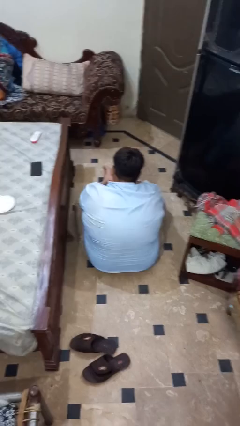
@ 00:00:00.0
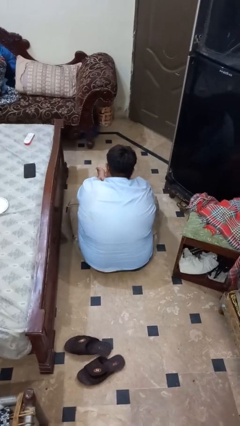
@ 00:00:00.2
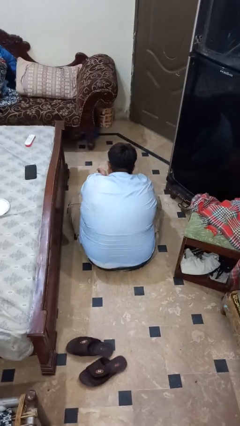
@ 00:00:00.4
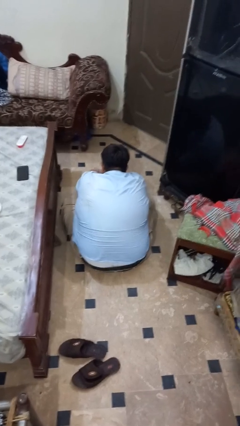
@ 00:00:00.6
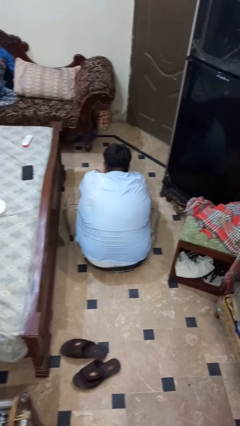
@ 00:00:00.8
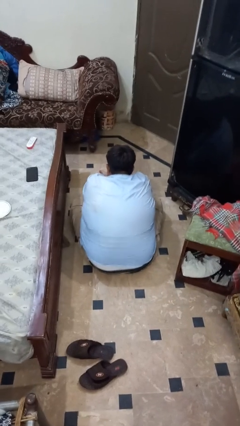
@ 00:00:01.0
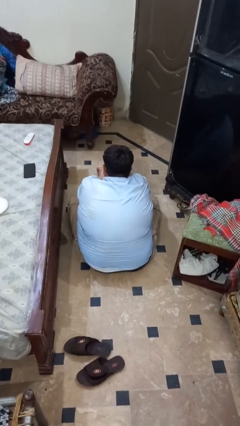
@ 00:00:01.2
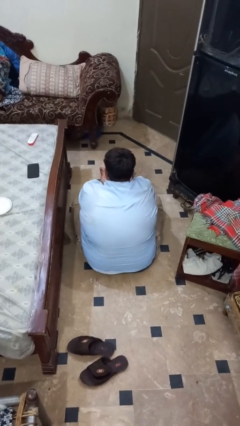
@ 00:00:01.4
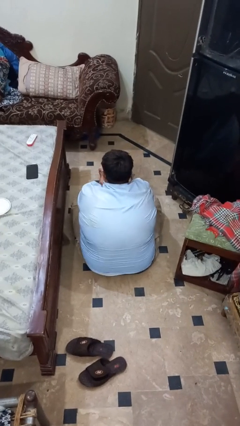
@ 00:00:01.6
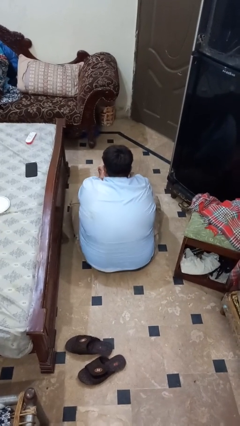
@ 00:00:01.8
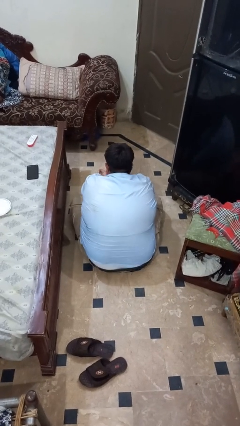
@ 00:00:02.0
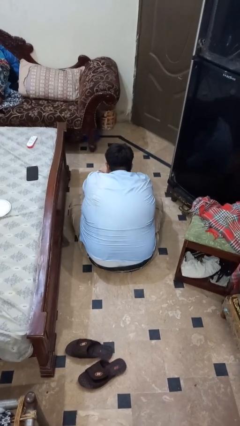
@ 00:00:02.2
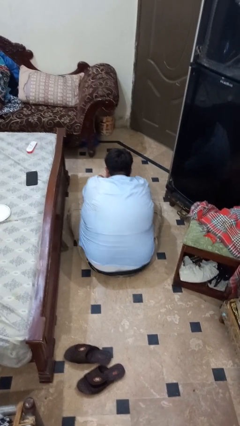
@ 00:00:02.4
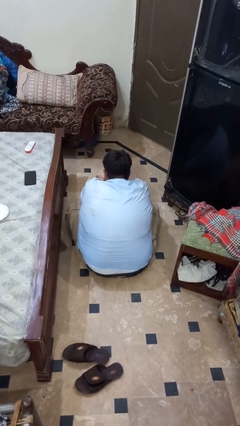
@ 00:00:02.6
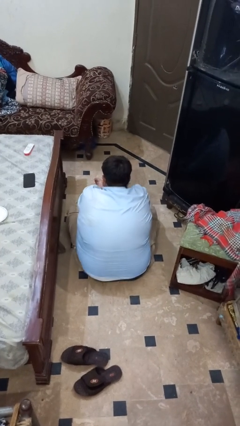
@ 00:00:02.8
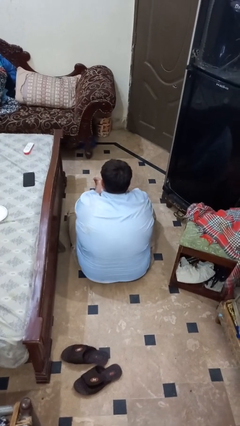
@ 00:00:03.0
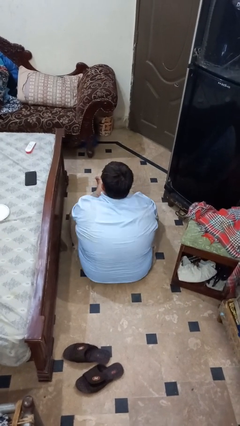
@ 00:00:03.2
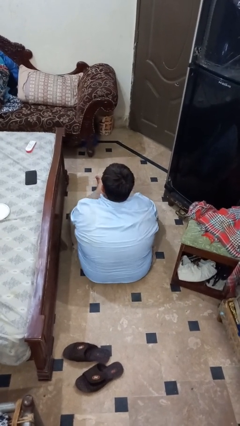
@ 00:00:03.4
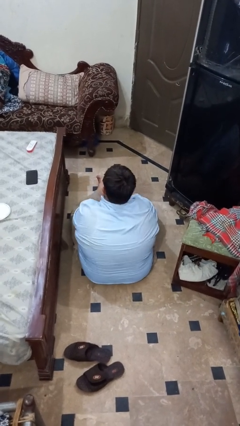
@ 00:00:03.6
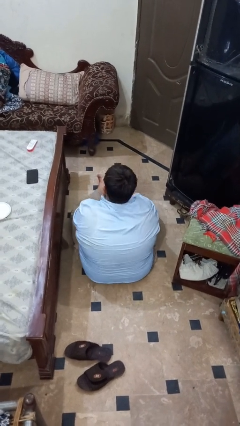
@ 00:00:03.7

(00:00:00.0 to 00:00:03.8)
person rubs foot

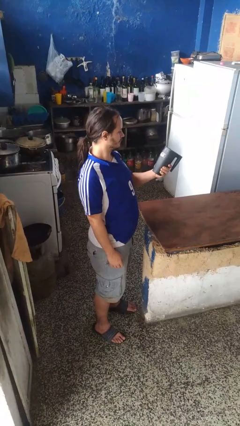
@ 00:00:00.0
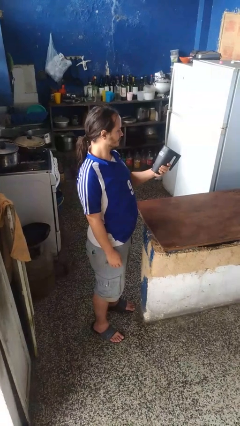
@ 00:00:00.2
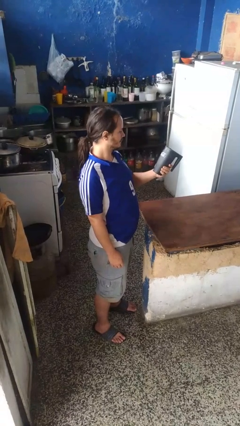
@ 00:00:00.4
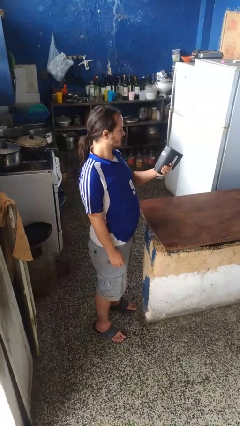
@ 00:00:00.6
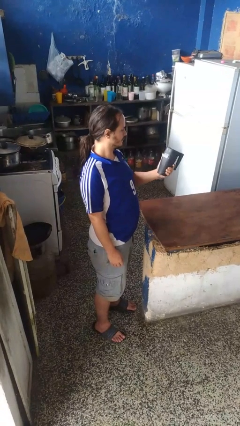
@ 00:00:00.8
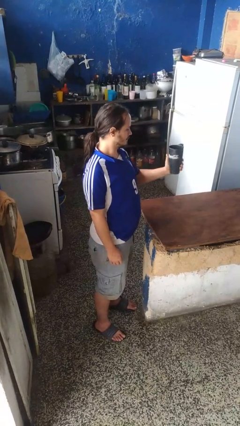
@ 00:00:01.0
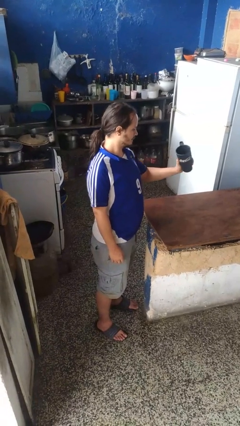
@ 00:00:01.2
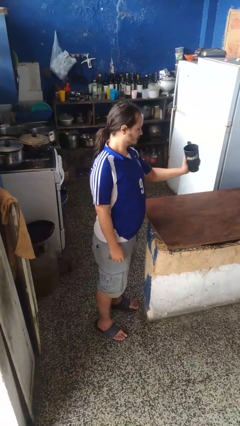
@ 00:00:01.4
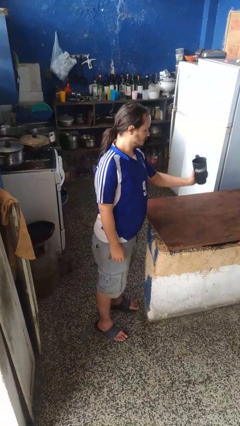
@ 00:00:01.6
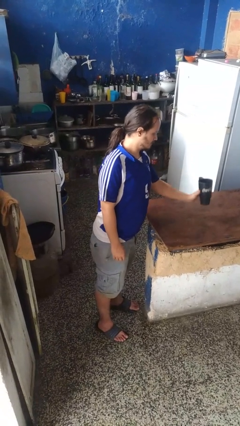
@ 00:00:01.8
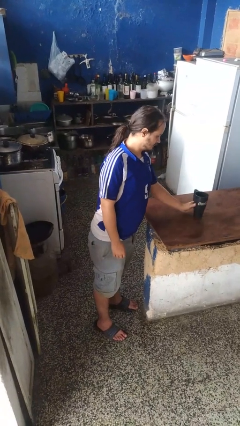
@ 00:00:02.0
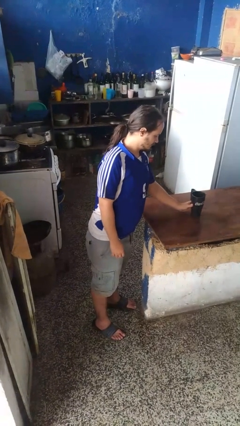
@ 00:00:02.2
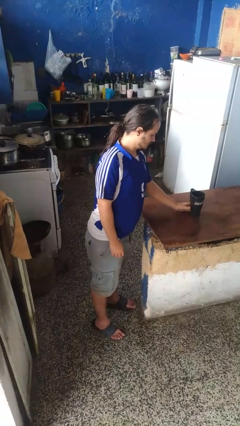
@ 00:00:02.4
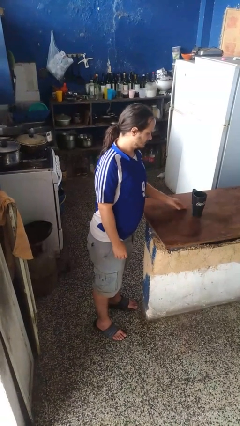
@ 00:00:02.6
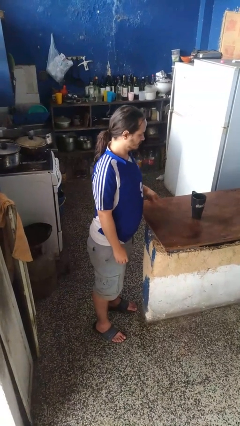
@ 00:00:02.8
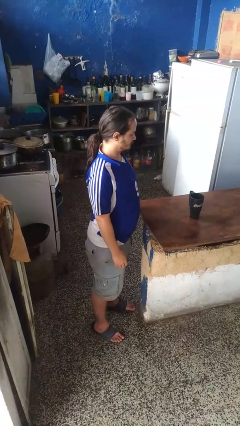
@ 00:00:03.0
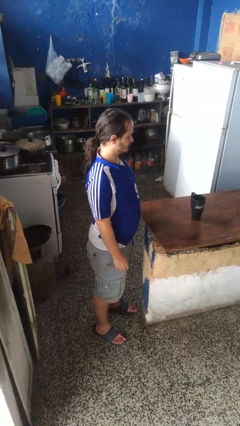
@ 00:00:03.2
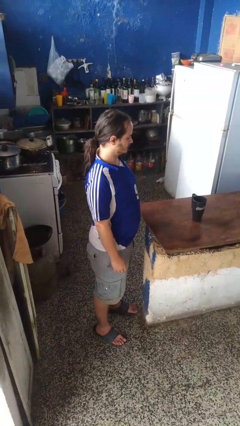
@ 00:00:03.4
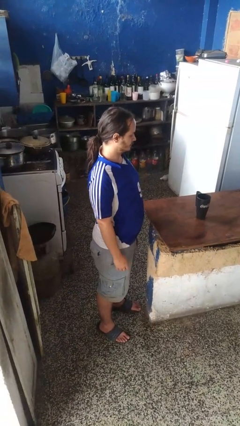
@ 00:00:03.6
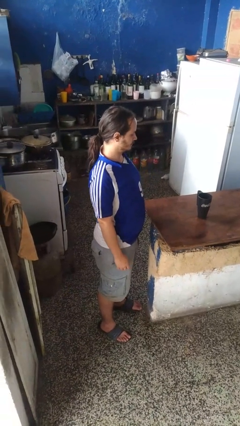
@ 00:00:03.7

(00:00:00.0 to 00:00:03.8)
person puts down object on countertop

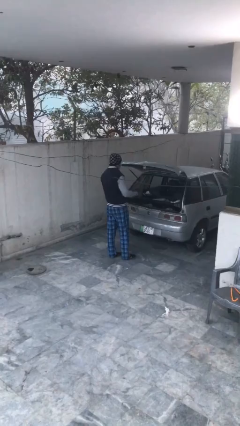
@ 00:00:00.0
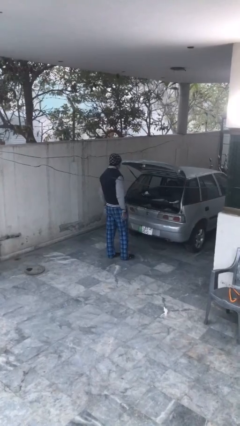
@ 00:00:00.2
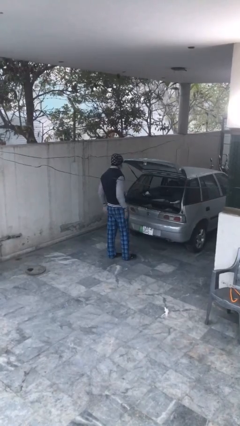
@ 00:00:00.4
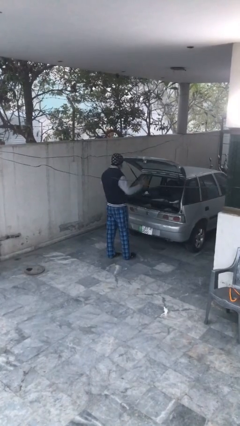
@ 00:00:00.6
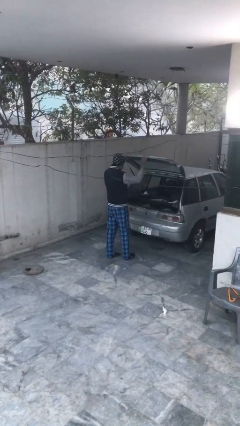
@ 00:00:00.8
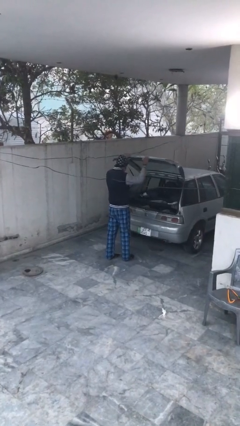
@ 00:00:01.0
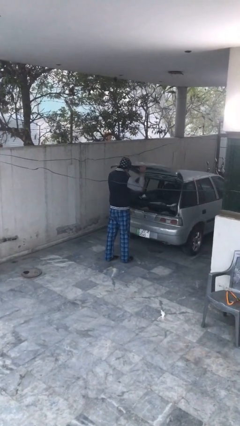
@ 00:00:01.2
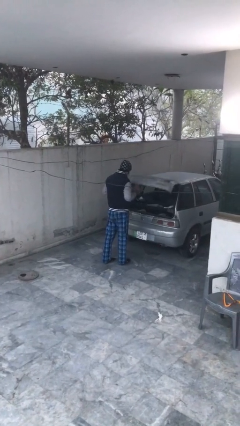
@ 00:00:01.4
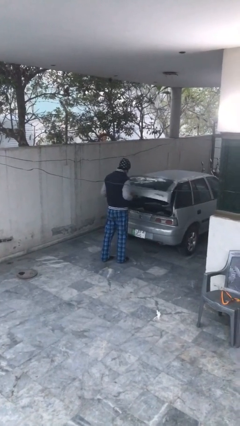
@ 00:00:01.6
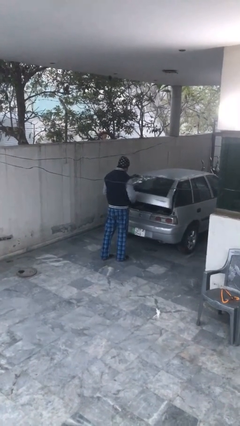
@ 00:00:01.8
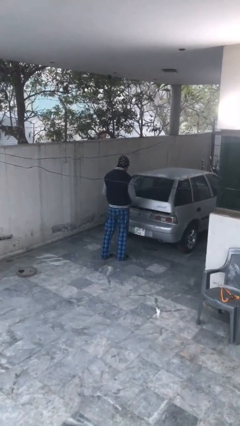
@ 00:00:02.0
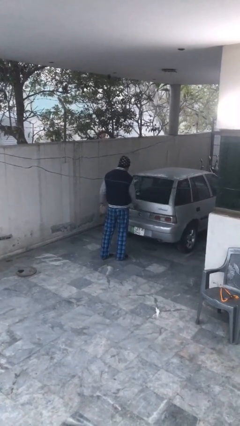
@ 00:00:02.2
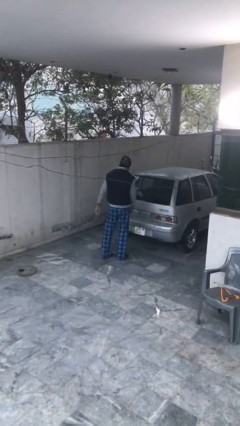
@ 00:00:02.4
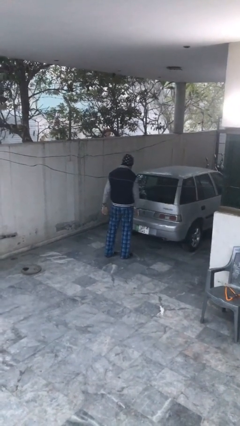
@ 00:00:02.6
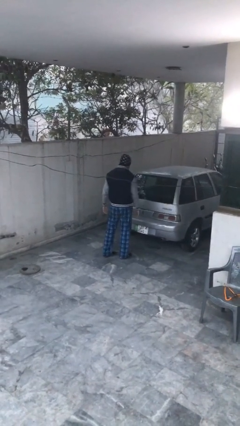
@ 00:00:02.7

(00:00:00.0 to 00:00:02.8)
person closes car trunk

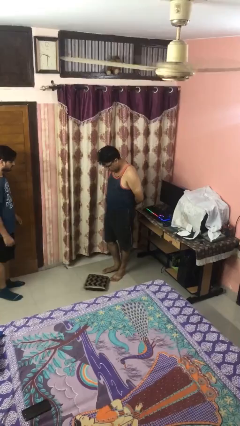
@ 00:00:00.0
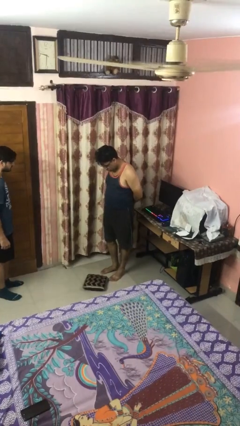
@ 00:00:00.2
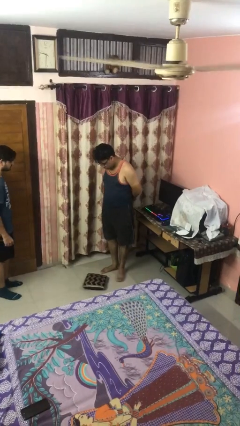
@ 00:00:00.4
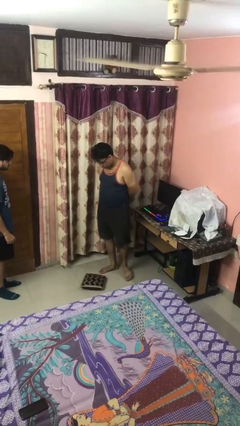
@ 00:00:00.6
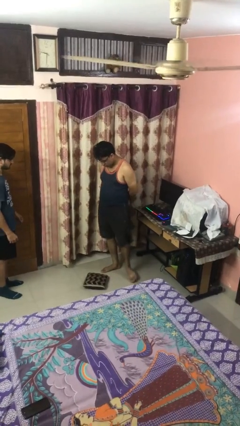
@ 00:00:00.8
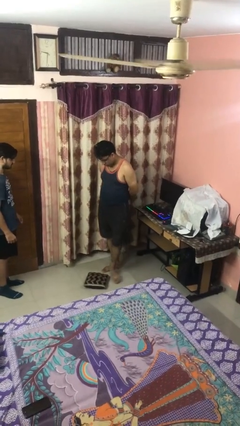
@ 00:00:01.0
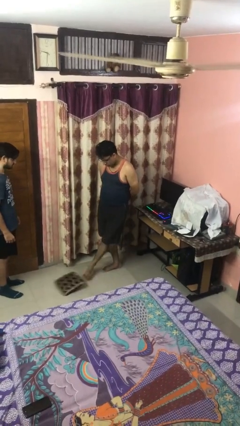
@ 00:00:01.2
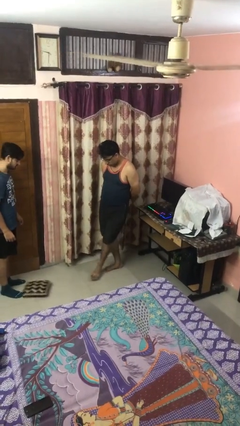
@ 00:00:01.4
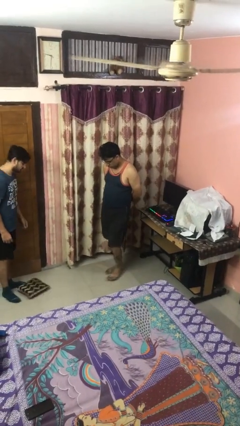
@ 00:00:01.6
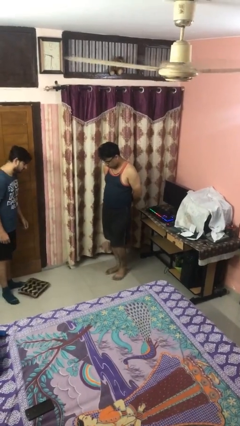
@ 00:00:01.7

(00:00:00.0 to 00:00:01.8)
person kicks object to person

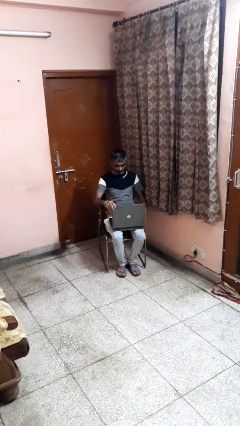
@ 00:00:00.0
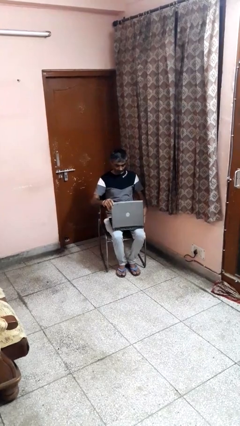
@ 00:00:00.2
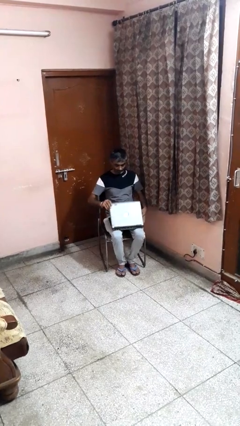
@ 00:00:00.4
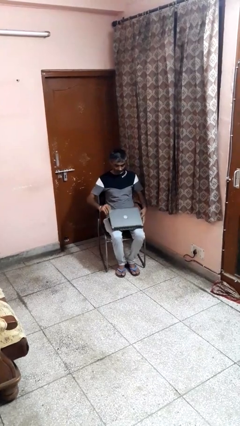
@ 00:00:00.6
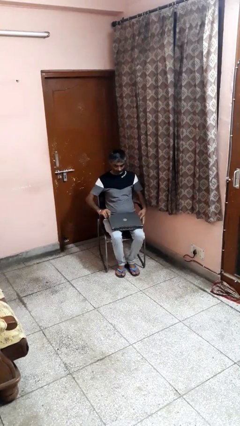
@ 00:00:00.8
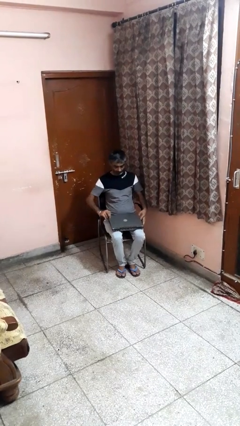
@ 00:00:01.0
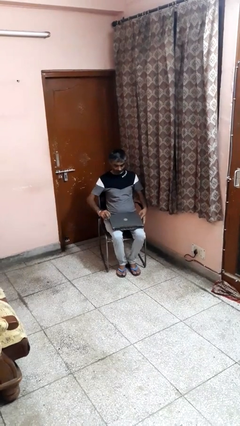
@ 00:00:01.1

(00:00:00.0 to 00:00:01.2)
person closes laptop

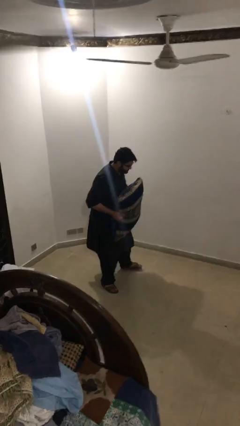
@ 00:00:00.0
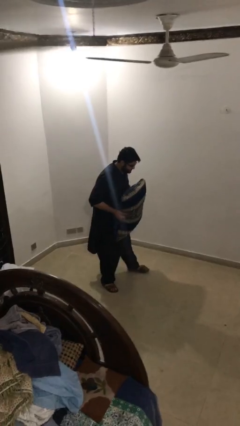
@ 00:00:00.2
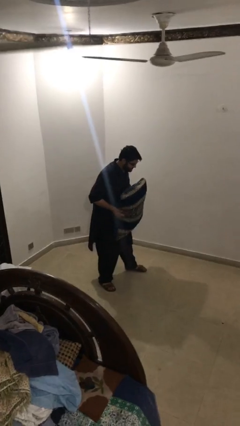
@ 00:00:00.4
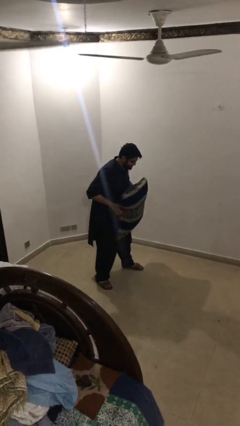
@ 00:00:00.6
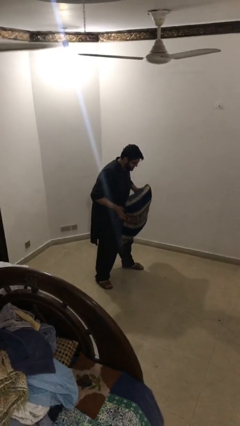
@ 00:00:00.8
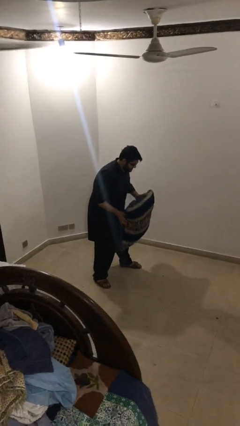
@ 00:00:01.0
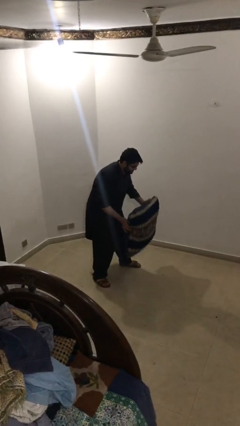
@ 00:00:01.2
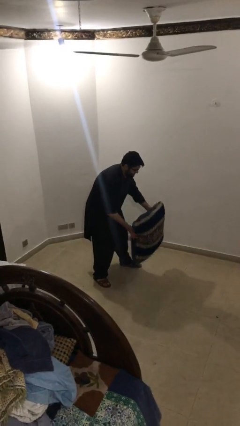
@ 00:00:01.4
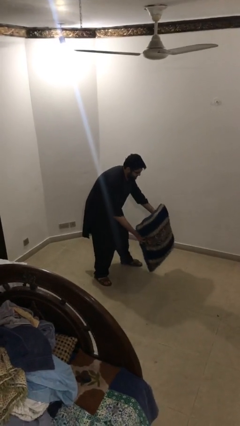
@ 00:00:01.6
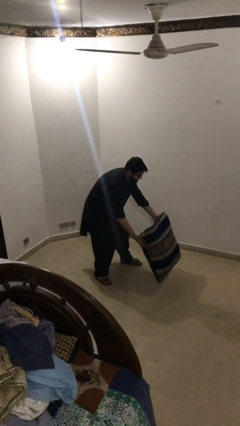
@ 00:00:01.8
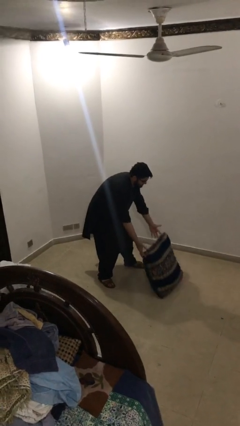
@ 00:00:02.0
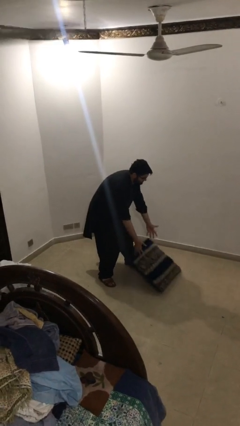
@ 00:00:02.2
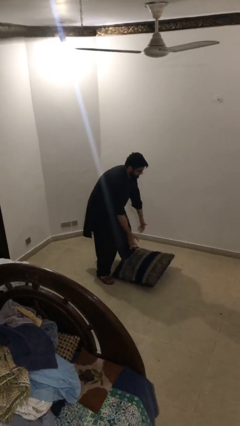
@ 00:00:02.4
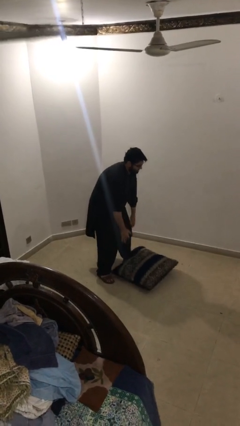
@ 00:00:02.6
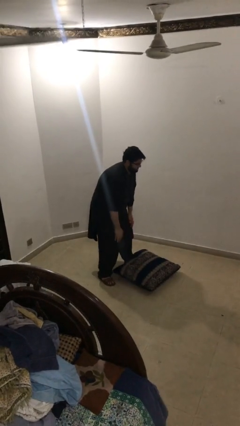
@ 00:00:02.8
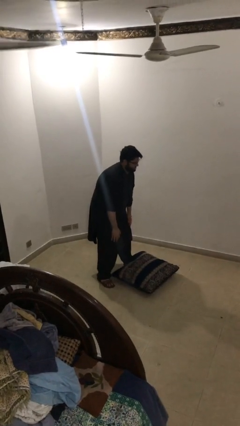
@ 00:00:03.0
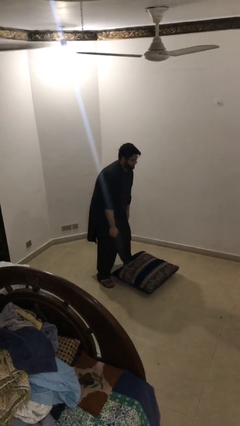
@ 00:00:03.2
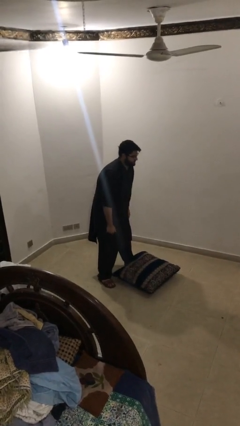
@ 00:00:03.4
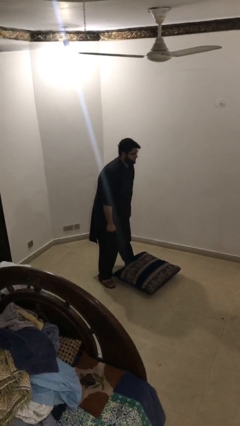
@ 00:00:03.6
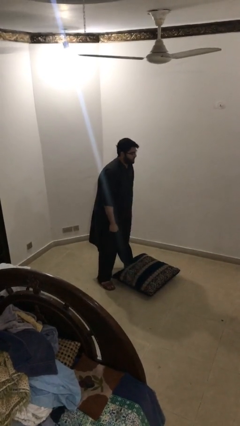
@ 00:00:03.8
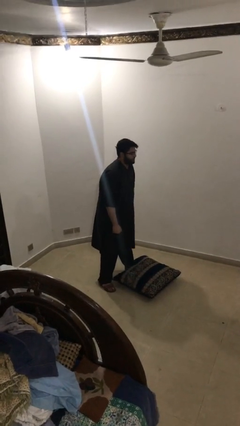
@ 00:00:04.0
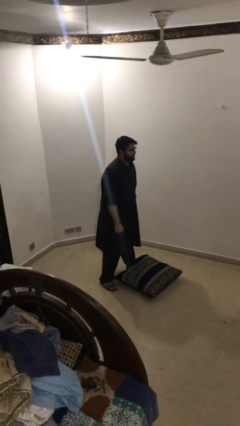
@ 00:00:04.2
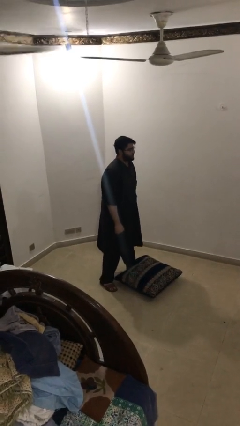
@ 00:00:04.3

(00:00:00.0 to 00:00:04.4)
person puts down object on floor
